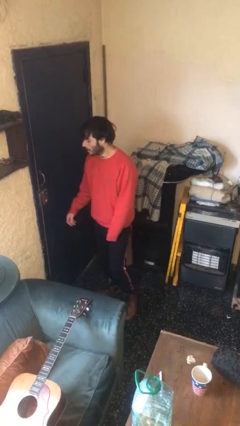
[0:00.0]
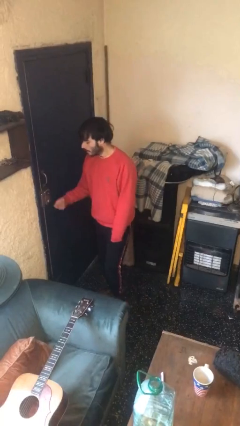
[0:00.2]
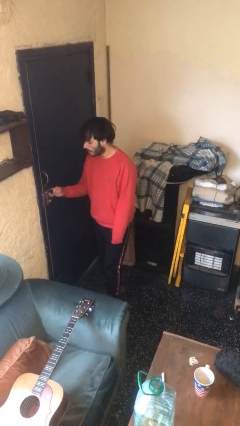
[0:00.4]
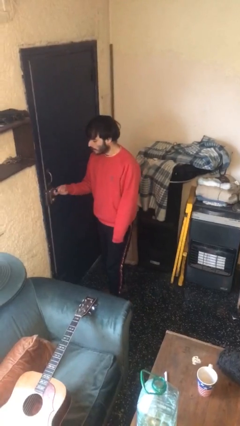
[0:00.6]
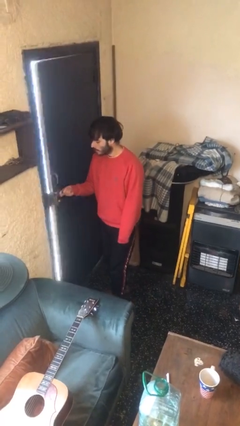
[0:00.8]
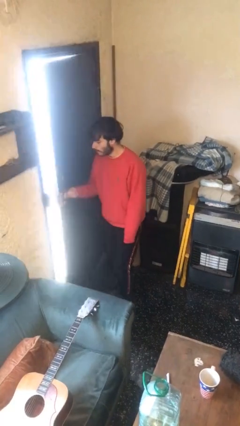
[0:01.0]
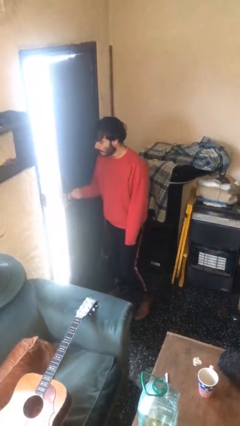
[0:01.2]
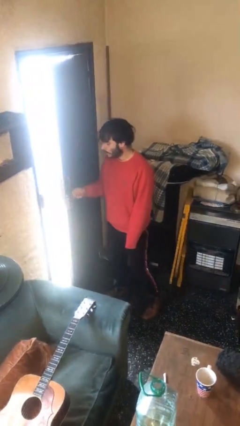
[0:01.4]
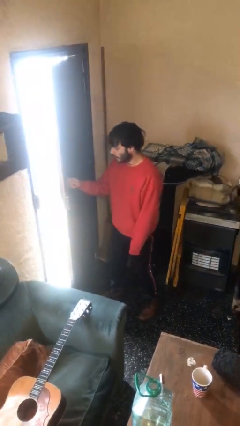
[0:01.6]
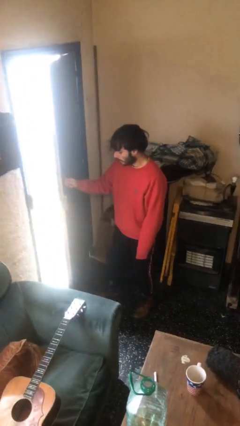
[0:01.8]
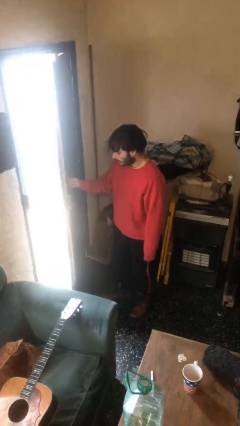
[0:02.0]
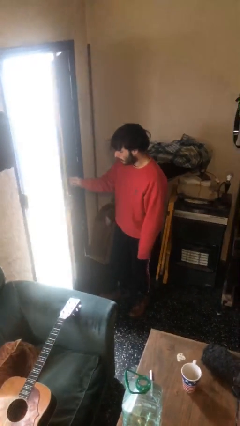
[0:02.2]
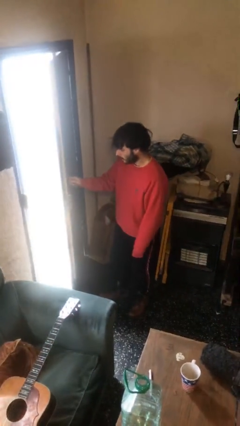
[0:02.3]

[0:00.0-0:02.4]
person opens facility door

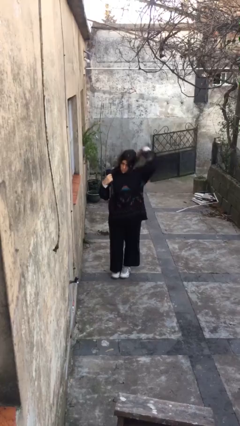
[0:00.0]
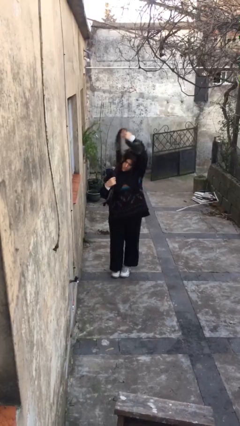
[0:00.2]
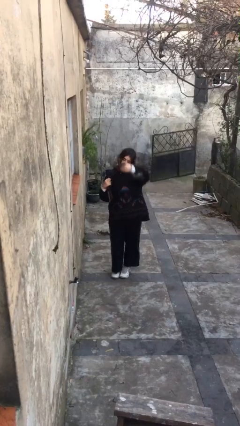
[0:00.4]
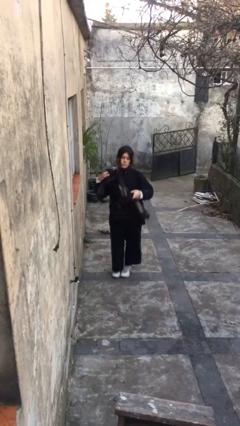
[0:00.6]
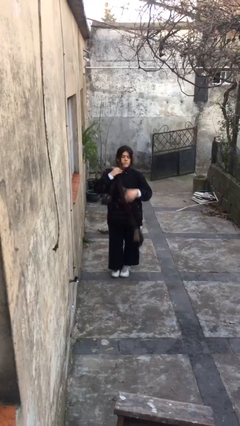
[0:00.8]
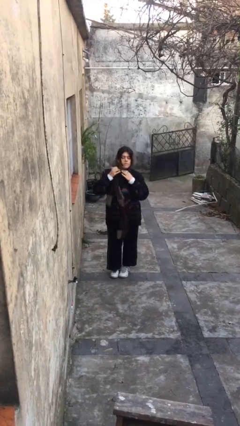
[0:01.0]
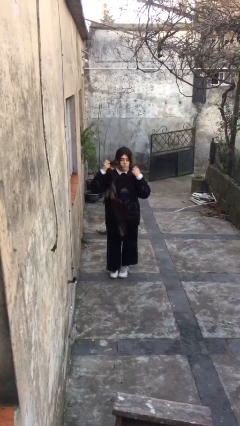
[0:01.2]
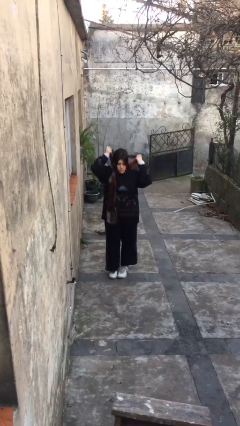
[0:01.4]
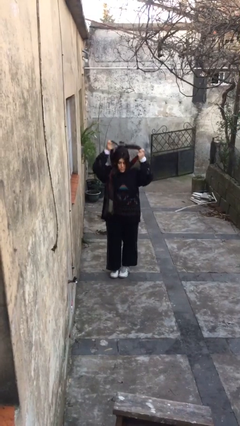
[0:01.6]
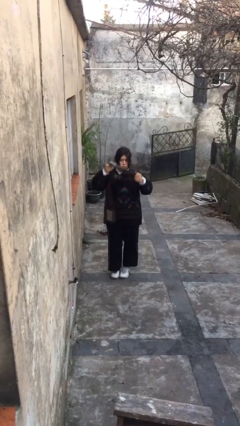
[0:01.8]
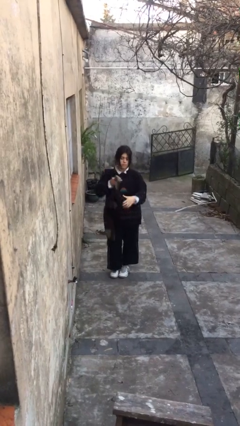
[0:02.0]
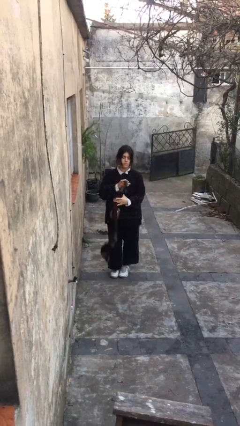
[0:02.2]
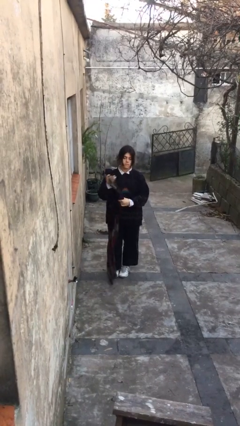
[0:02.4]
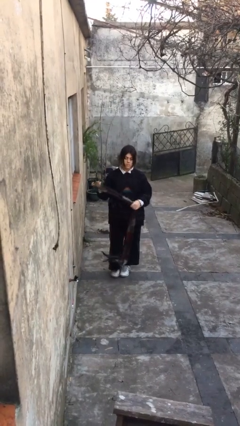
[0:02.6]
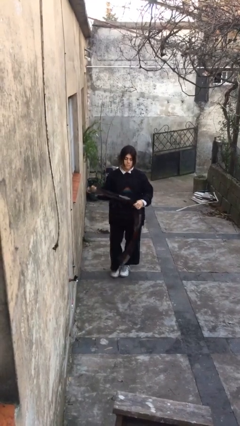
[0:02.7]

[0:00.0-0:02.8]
person takes off scarf

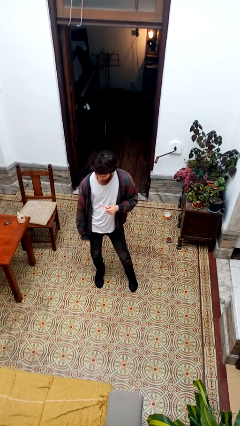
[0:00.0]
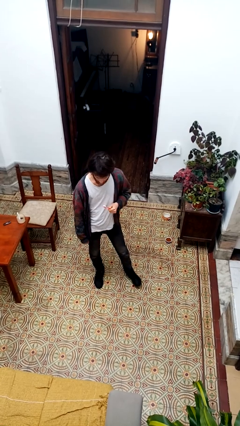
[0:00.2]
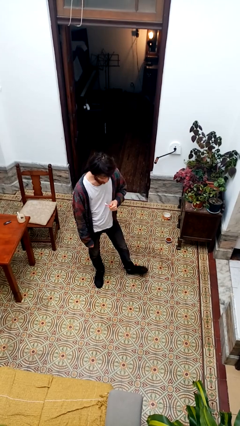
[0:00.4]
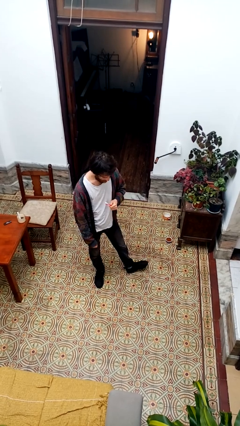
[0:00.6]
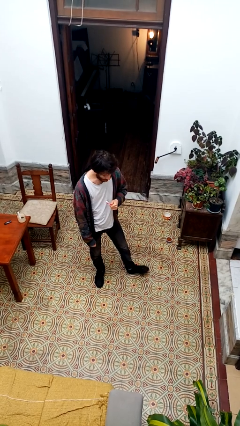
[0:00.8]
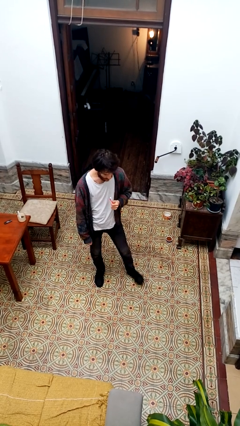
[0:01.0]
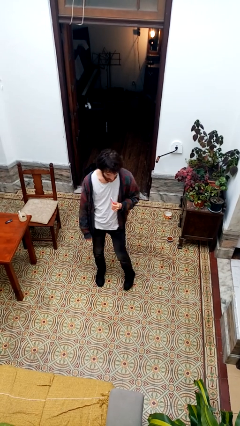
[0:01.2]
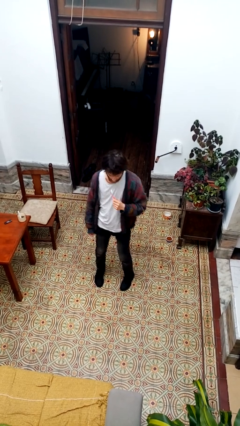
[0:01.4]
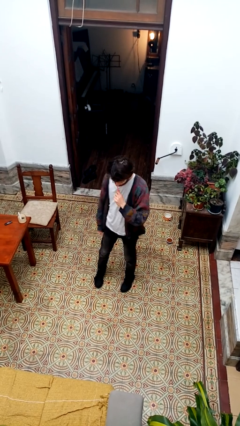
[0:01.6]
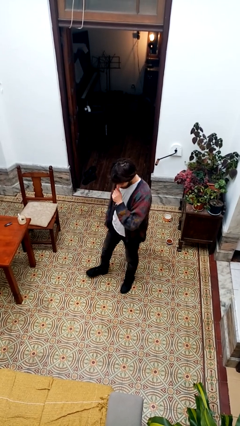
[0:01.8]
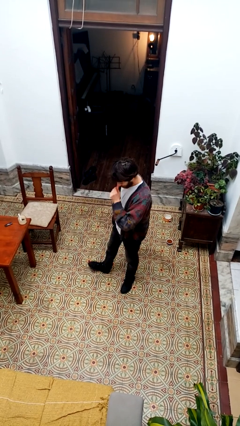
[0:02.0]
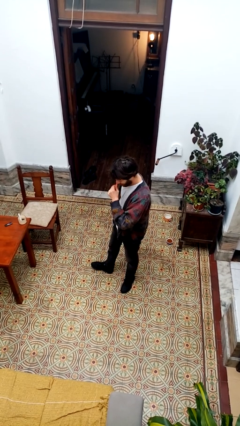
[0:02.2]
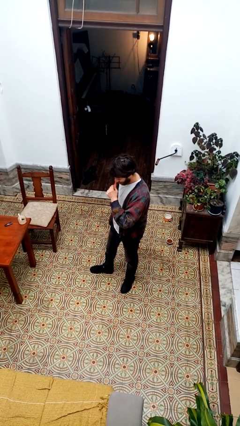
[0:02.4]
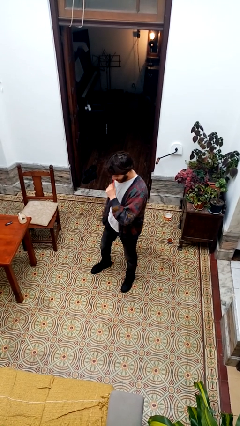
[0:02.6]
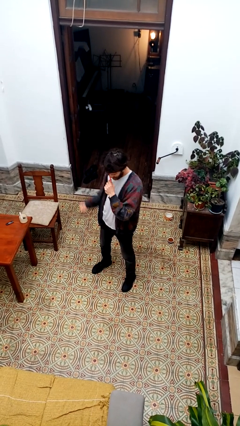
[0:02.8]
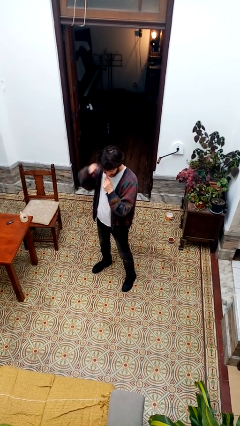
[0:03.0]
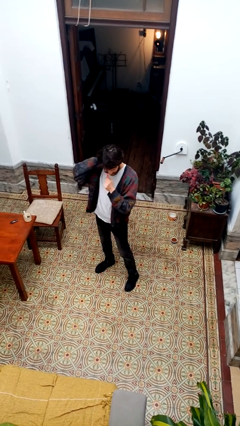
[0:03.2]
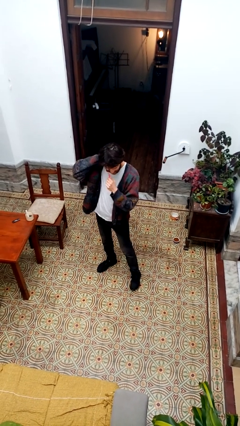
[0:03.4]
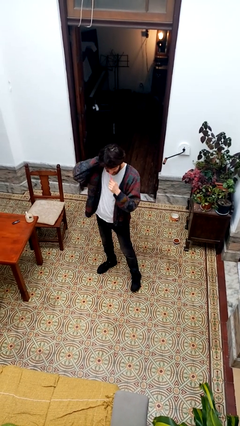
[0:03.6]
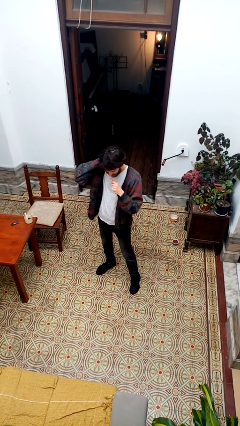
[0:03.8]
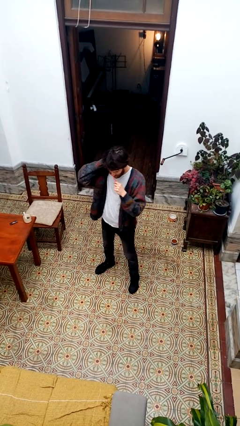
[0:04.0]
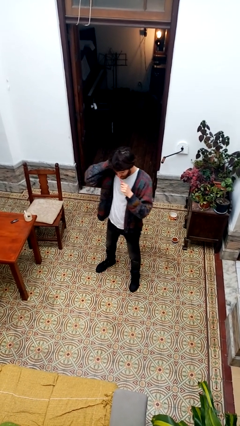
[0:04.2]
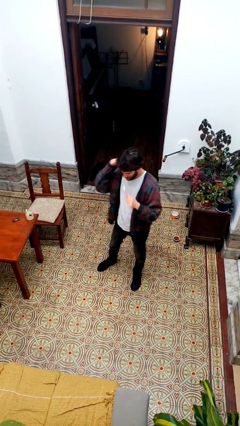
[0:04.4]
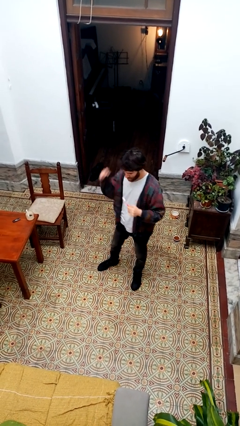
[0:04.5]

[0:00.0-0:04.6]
person brushes teeth

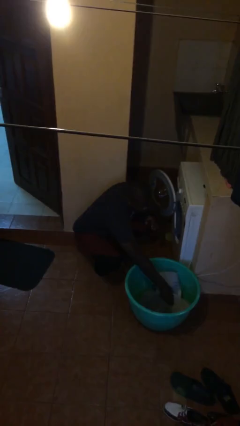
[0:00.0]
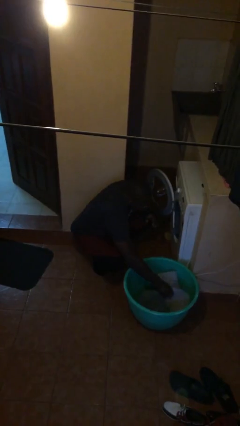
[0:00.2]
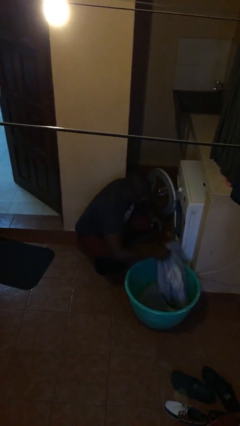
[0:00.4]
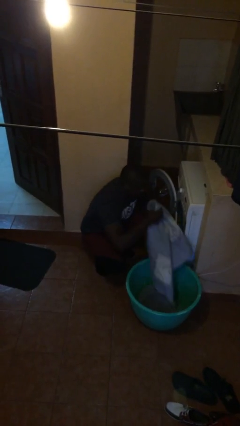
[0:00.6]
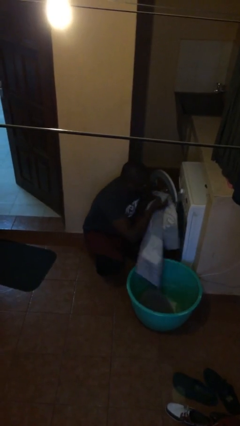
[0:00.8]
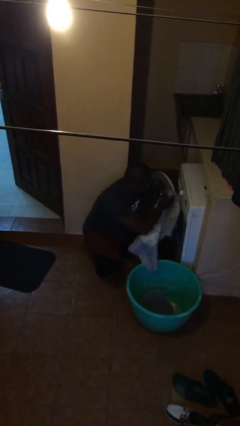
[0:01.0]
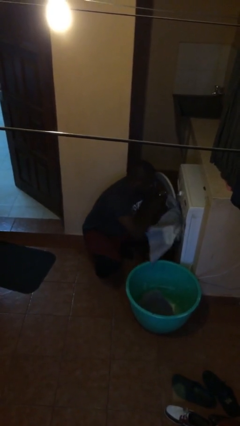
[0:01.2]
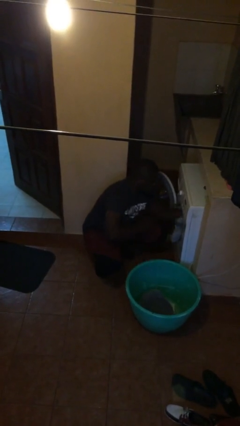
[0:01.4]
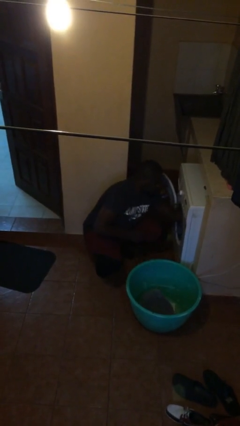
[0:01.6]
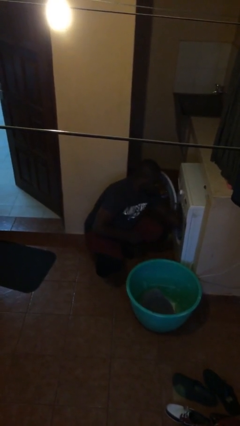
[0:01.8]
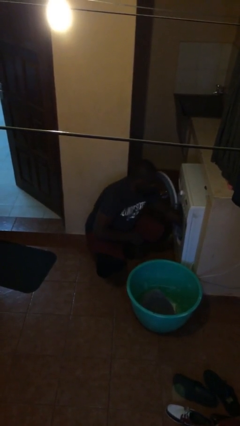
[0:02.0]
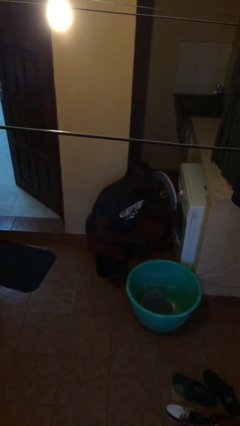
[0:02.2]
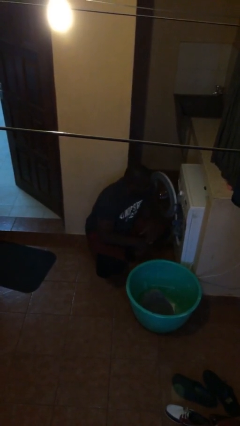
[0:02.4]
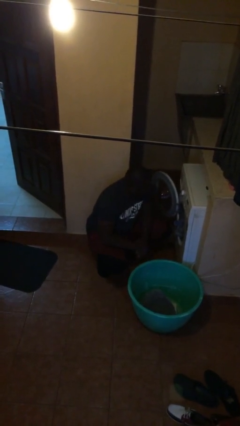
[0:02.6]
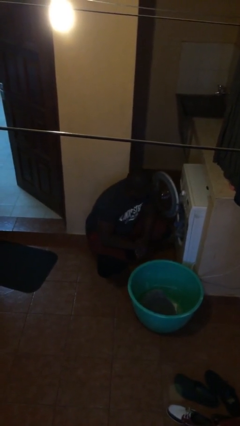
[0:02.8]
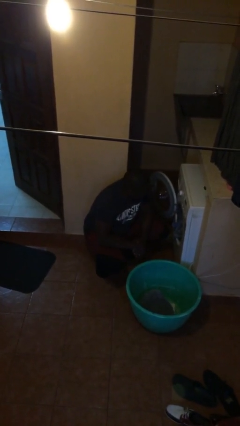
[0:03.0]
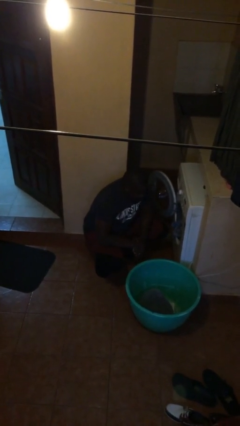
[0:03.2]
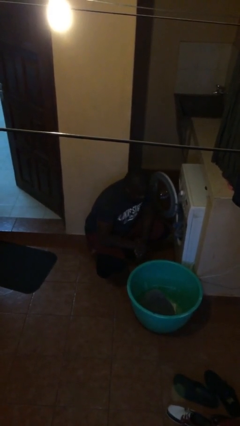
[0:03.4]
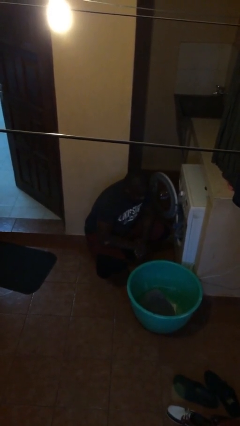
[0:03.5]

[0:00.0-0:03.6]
person loads clotheswasher

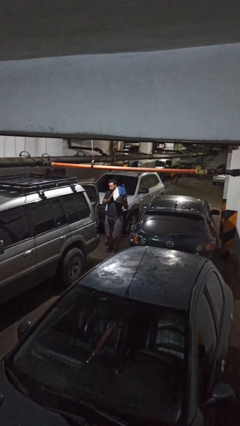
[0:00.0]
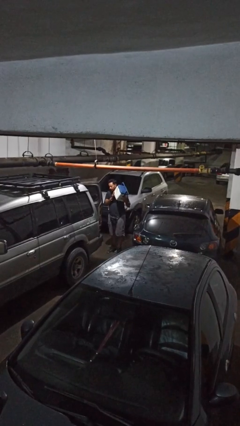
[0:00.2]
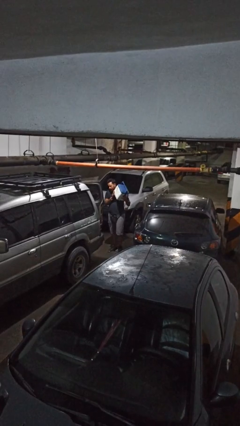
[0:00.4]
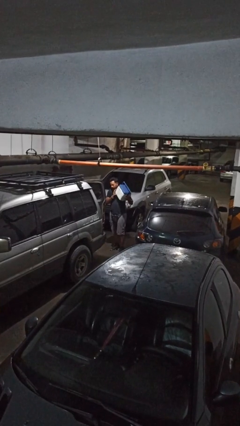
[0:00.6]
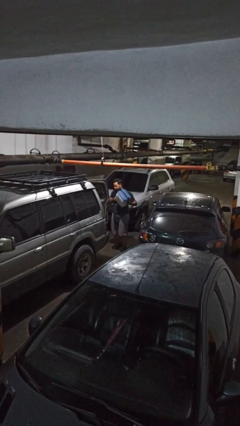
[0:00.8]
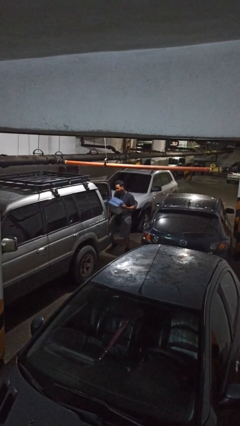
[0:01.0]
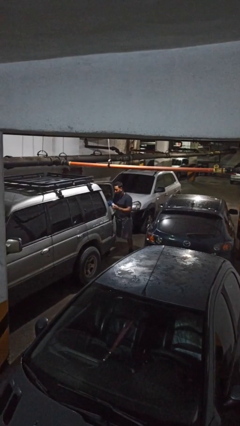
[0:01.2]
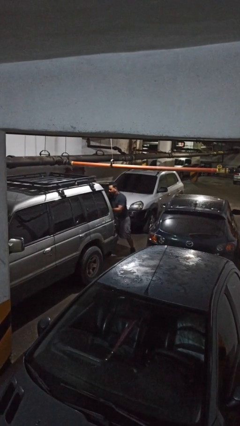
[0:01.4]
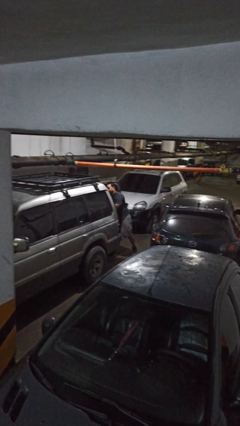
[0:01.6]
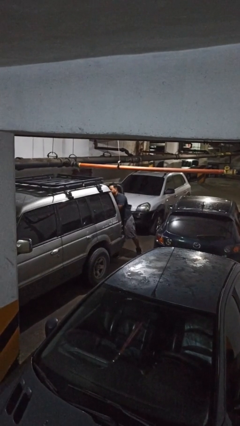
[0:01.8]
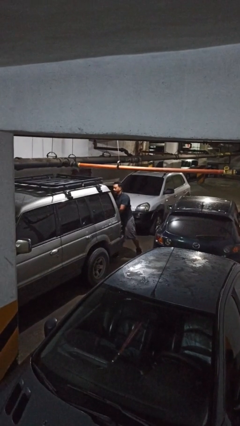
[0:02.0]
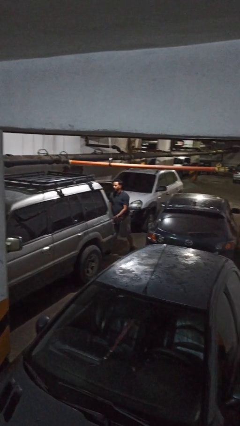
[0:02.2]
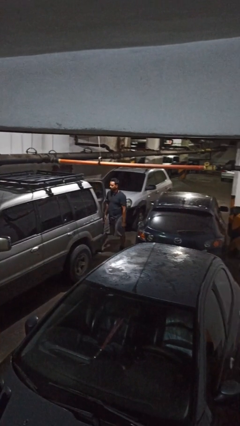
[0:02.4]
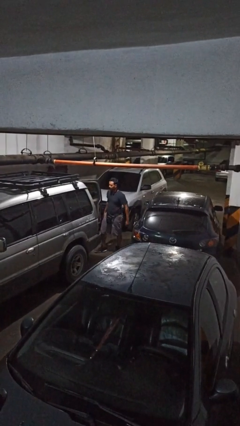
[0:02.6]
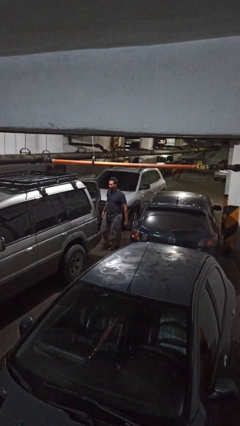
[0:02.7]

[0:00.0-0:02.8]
person loads car

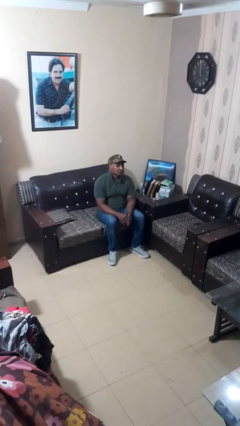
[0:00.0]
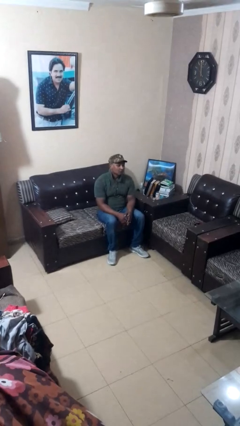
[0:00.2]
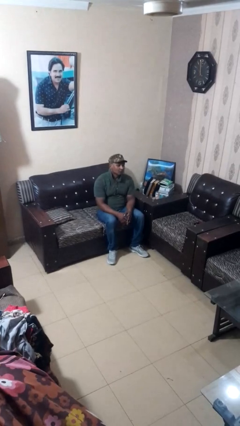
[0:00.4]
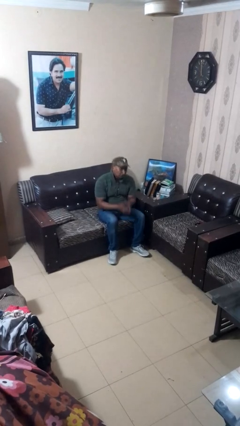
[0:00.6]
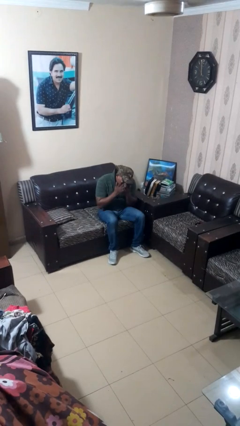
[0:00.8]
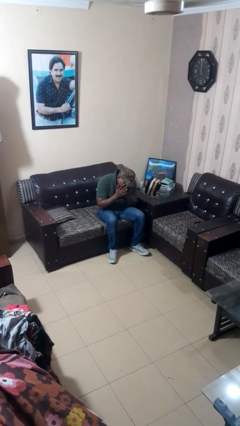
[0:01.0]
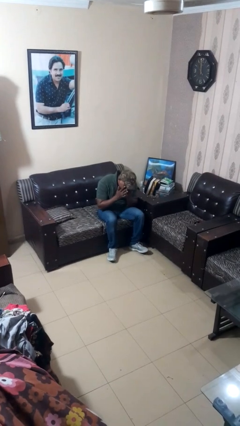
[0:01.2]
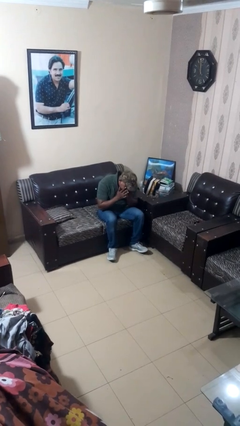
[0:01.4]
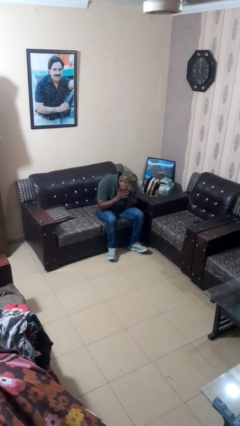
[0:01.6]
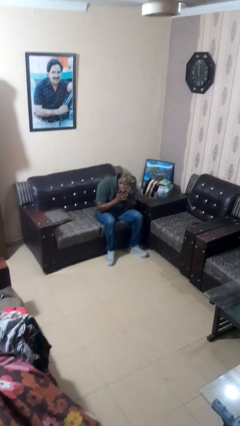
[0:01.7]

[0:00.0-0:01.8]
person sneezes into hand
